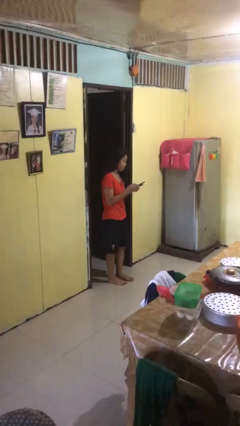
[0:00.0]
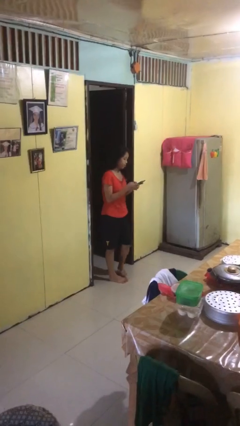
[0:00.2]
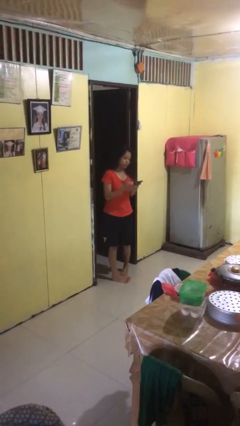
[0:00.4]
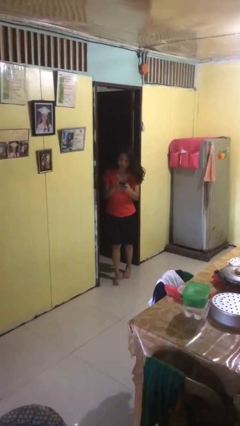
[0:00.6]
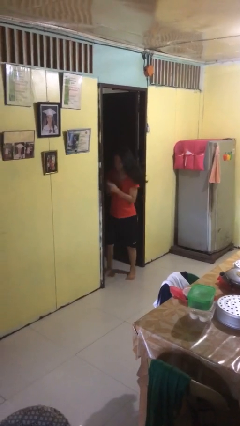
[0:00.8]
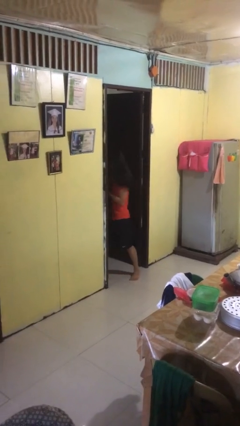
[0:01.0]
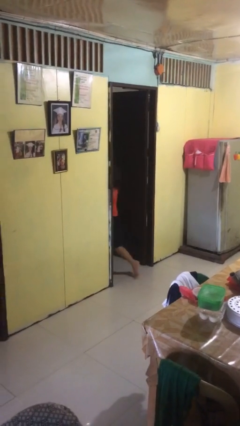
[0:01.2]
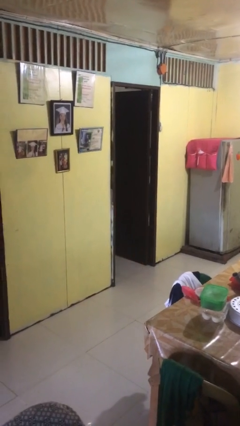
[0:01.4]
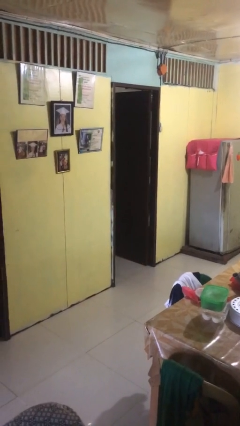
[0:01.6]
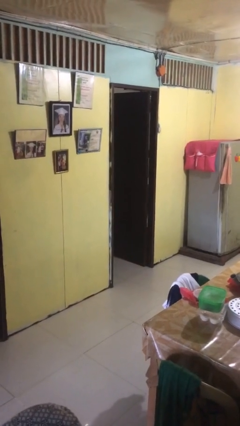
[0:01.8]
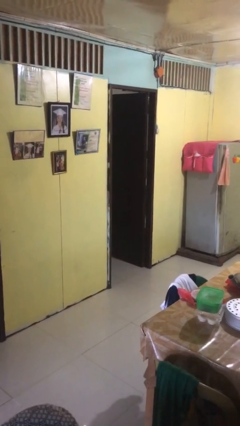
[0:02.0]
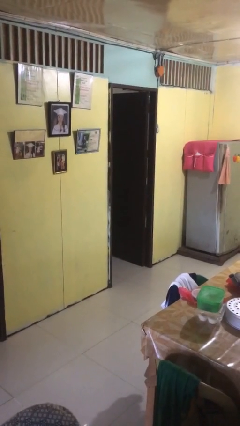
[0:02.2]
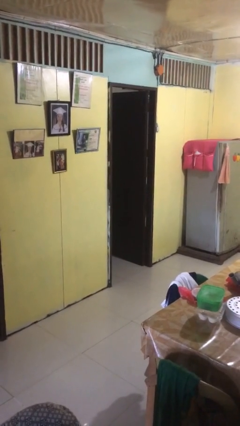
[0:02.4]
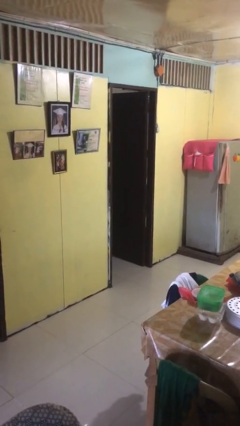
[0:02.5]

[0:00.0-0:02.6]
person exits scene through structure

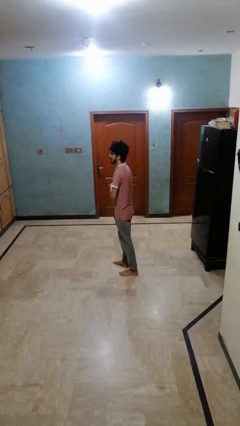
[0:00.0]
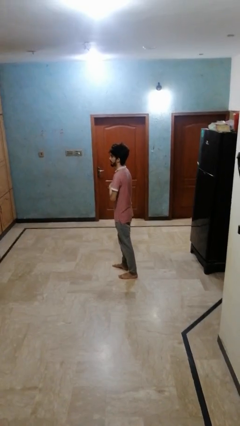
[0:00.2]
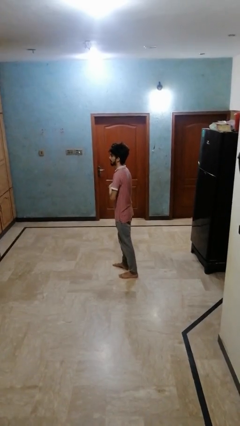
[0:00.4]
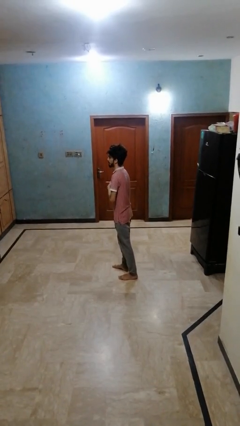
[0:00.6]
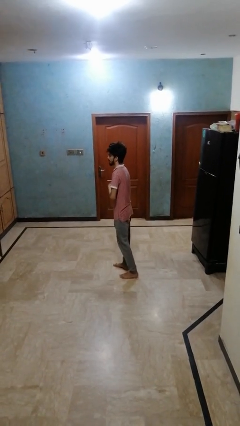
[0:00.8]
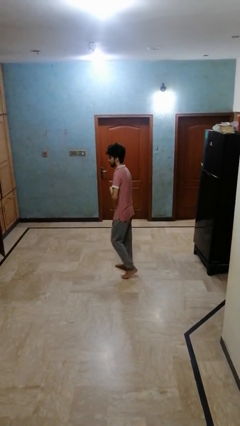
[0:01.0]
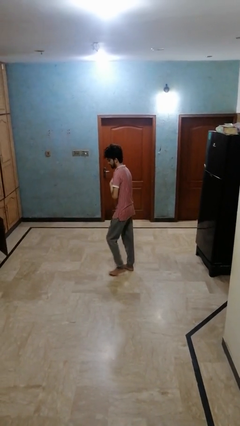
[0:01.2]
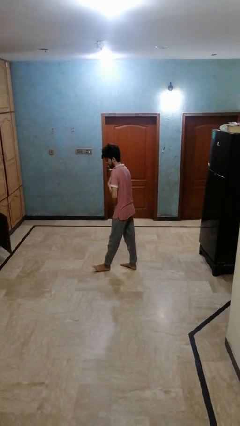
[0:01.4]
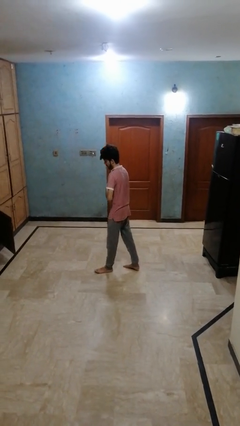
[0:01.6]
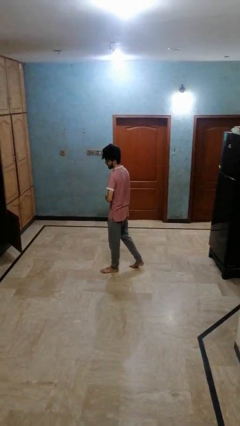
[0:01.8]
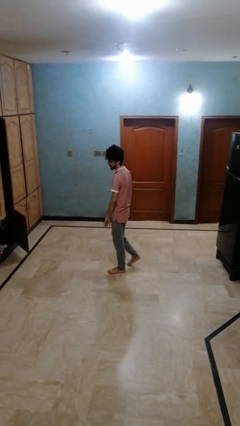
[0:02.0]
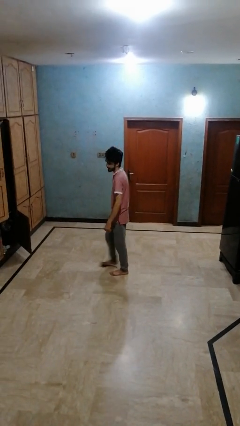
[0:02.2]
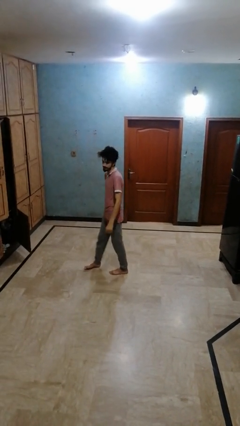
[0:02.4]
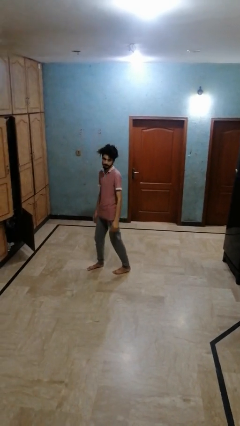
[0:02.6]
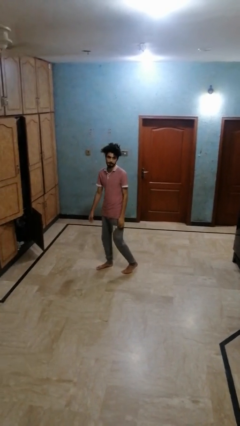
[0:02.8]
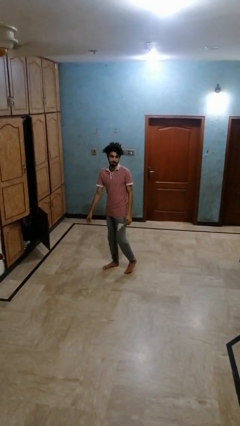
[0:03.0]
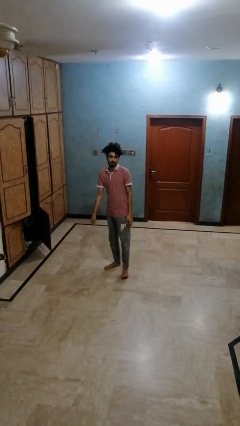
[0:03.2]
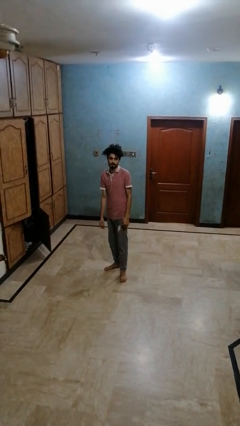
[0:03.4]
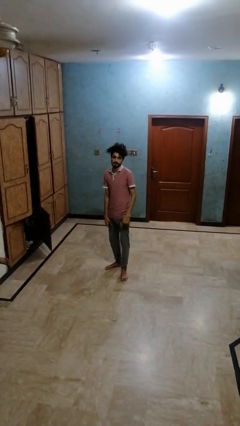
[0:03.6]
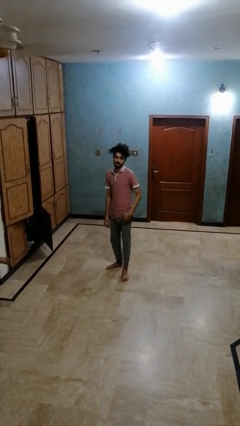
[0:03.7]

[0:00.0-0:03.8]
person twirls

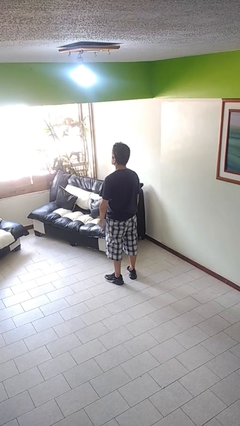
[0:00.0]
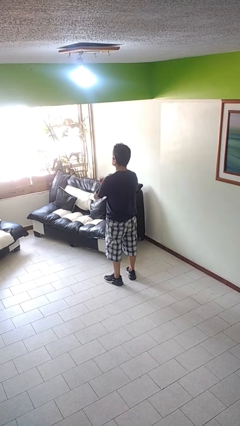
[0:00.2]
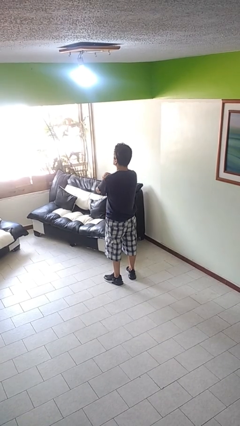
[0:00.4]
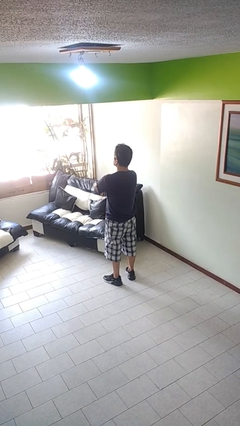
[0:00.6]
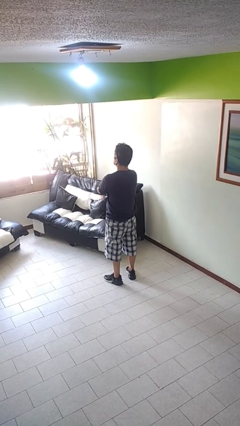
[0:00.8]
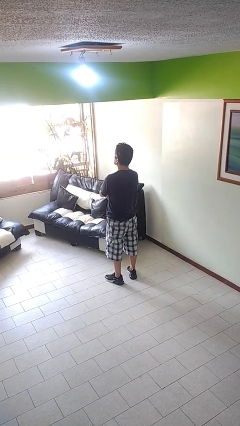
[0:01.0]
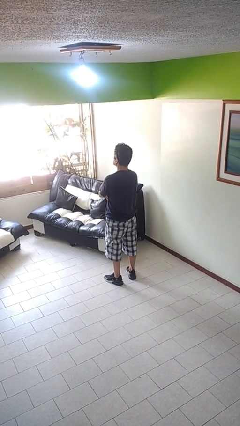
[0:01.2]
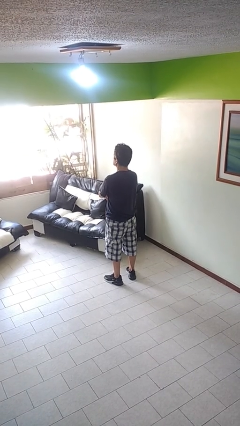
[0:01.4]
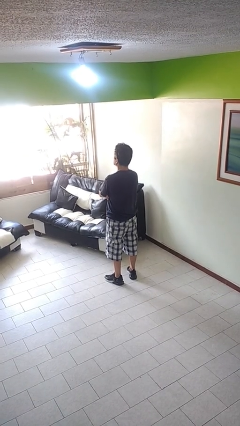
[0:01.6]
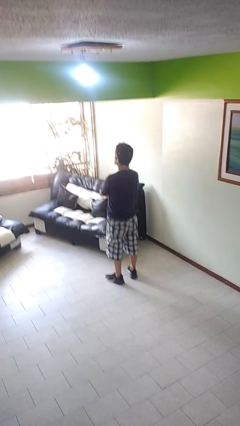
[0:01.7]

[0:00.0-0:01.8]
person crosses arms

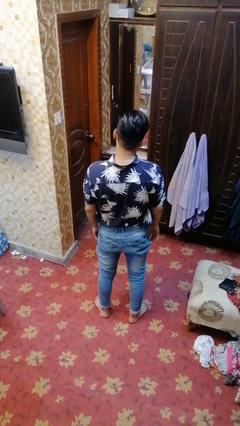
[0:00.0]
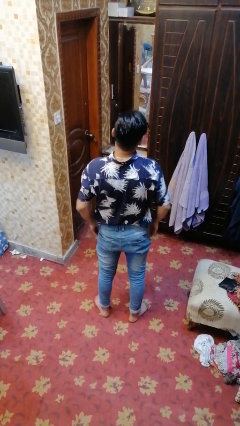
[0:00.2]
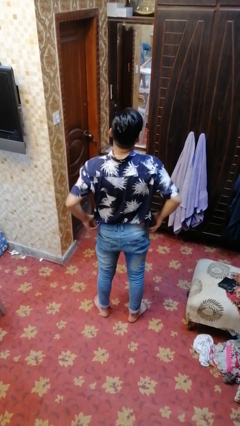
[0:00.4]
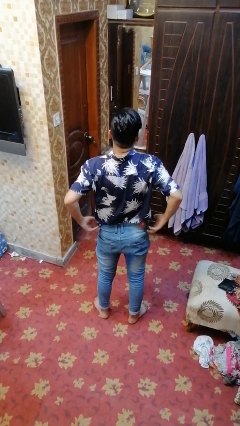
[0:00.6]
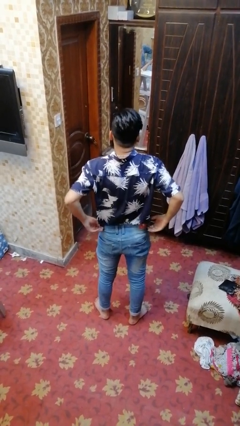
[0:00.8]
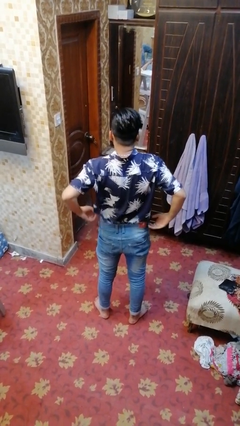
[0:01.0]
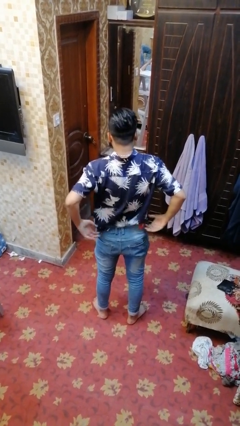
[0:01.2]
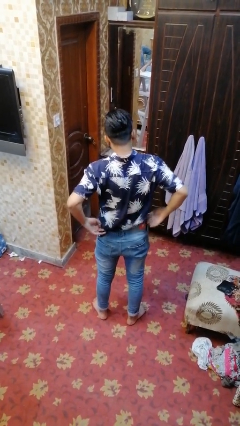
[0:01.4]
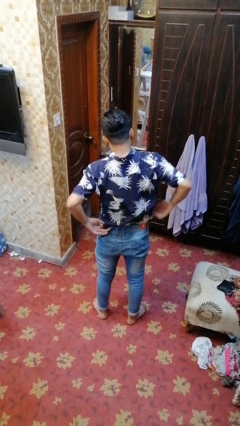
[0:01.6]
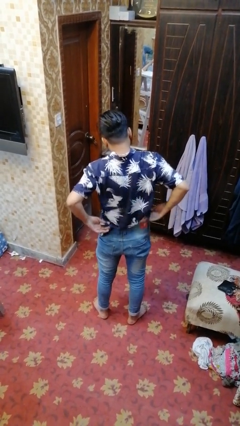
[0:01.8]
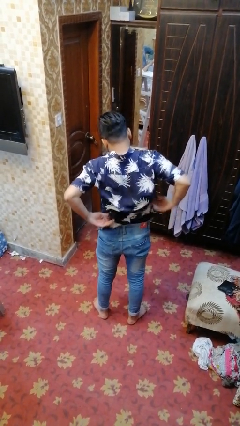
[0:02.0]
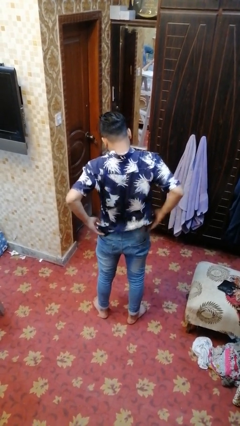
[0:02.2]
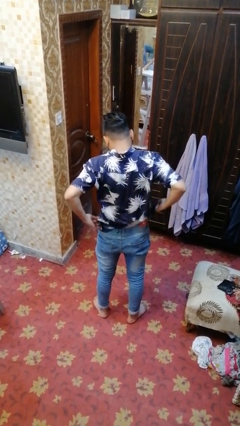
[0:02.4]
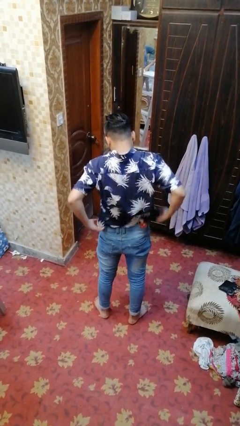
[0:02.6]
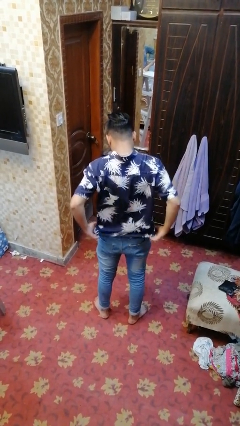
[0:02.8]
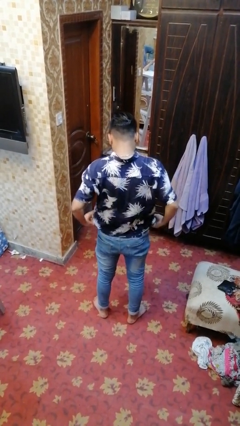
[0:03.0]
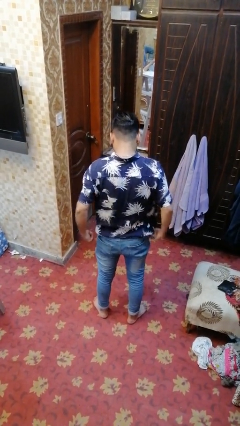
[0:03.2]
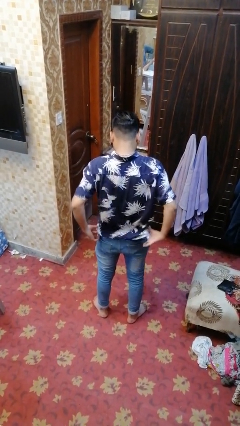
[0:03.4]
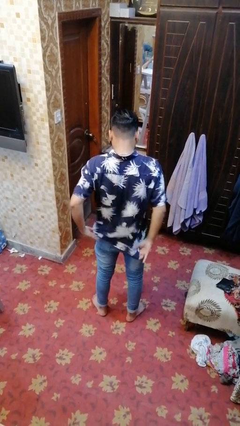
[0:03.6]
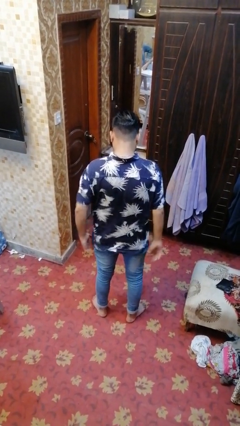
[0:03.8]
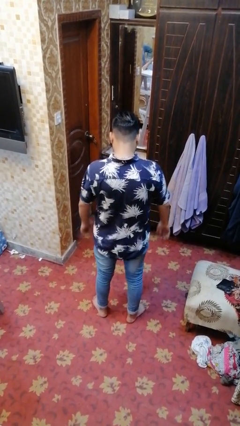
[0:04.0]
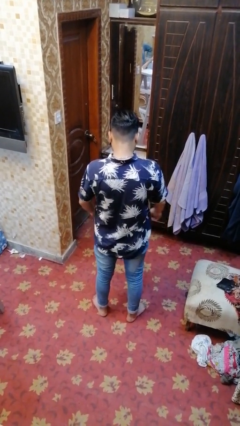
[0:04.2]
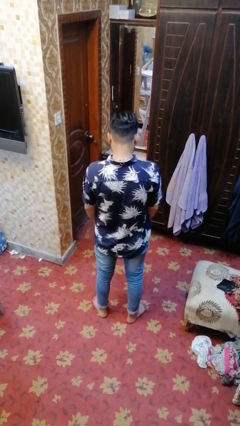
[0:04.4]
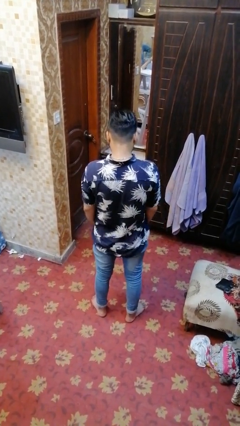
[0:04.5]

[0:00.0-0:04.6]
person untucks shirt

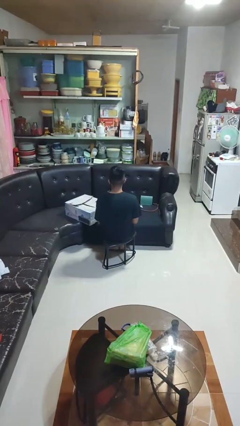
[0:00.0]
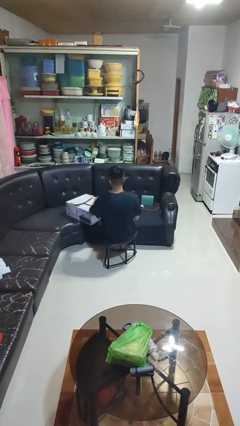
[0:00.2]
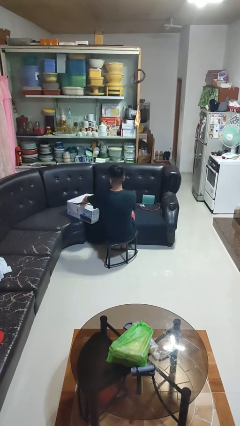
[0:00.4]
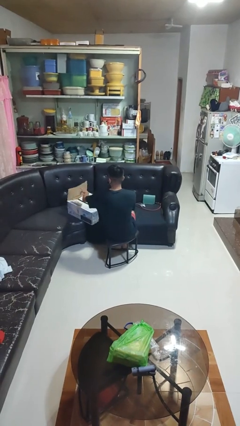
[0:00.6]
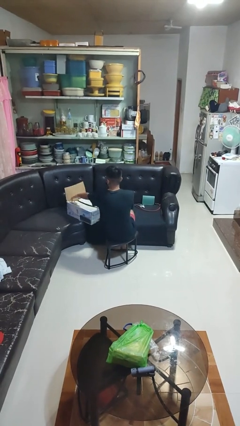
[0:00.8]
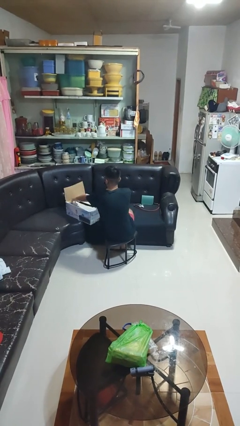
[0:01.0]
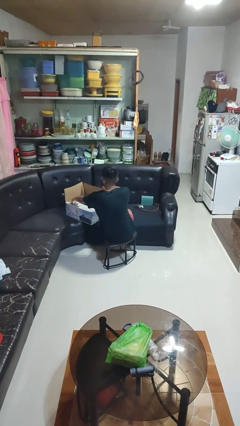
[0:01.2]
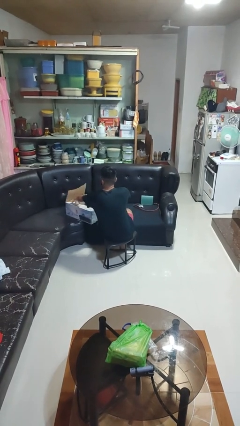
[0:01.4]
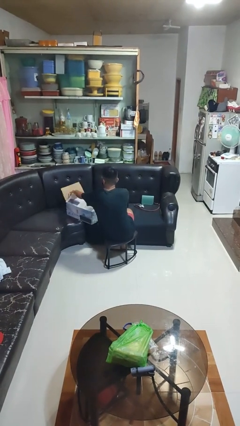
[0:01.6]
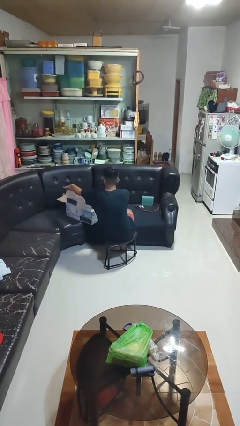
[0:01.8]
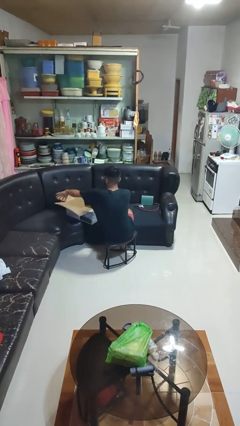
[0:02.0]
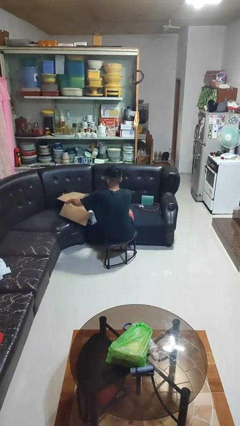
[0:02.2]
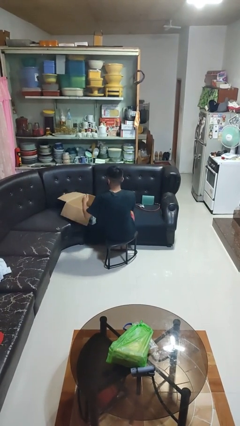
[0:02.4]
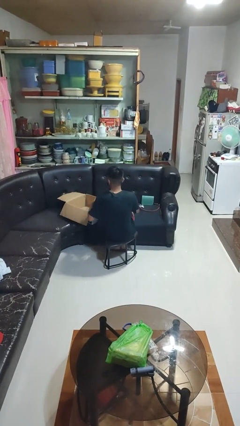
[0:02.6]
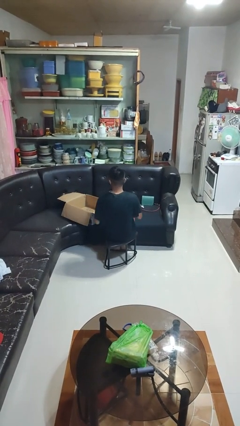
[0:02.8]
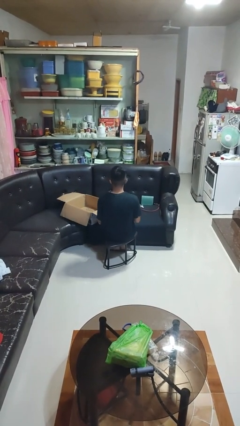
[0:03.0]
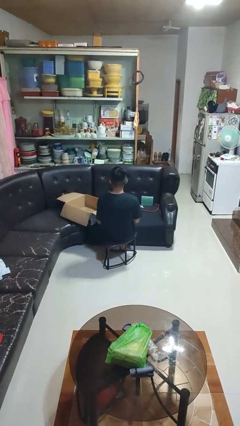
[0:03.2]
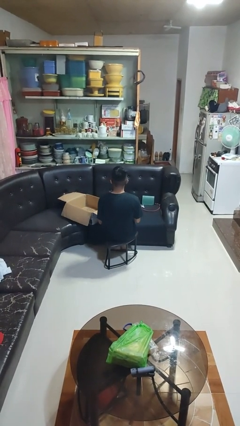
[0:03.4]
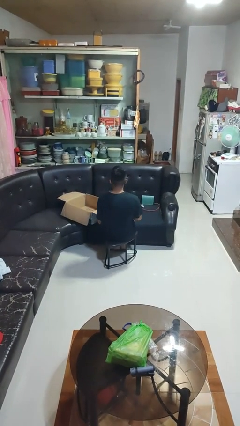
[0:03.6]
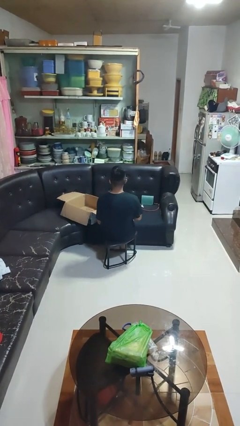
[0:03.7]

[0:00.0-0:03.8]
person opens box

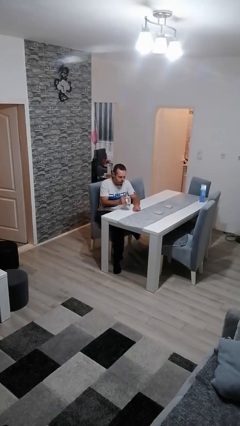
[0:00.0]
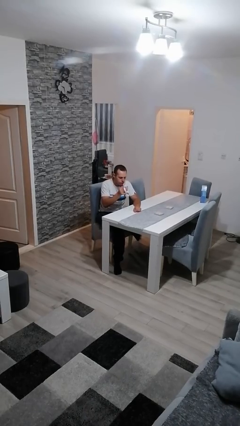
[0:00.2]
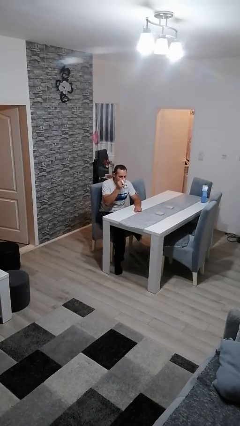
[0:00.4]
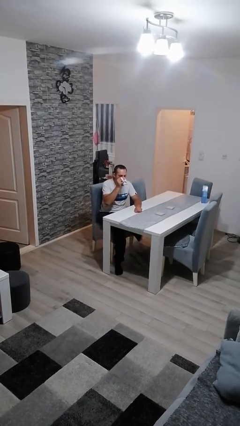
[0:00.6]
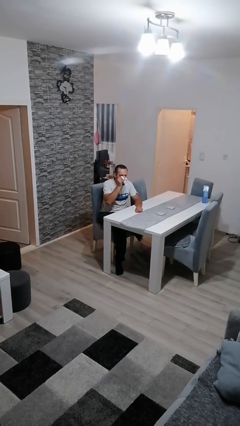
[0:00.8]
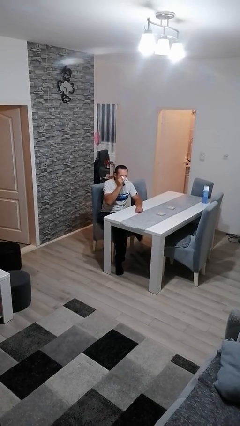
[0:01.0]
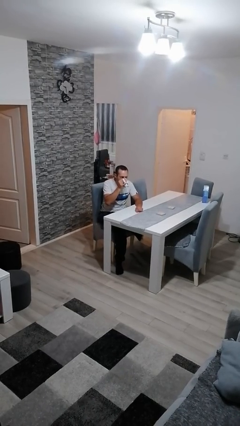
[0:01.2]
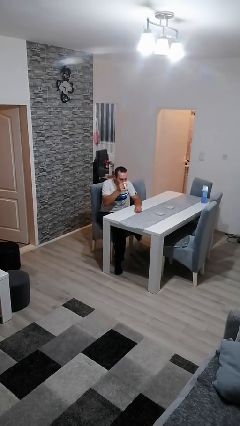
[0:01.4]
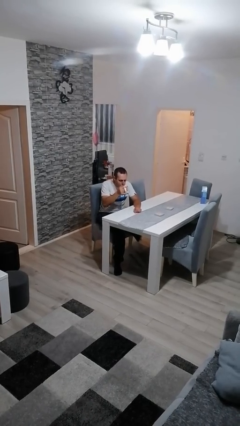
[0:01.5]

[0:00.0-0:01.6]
person drinks from mug
